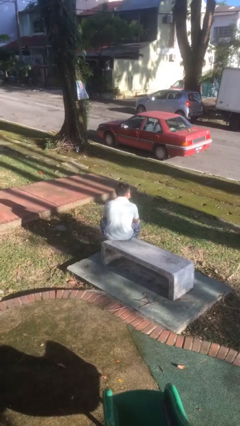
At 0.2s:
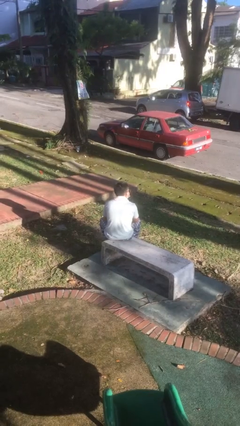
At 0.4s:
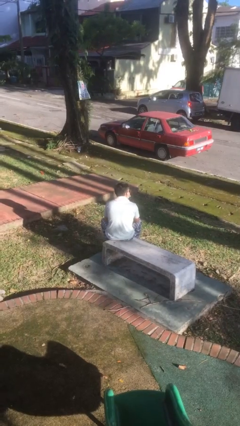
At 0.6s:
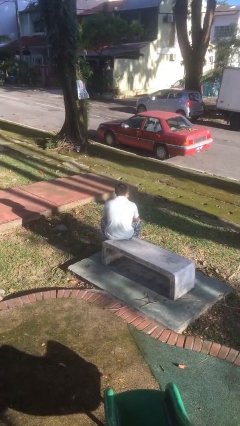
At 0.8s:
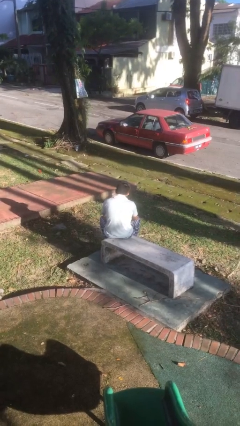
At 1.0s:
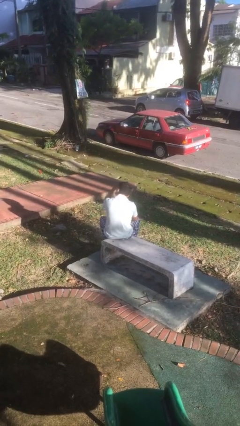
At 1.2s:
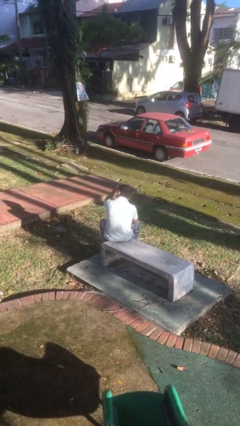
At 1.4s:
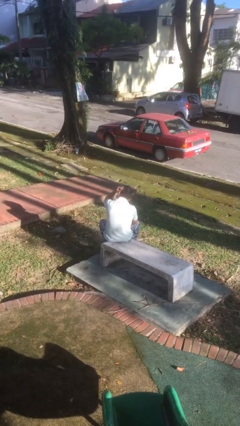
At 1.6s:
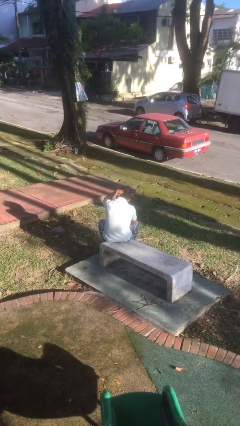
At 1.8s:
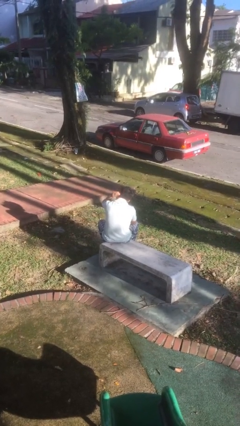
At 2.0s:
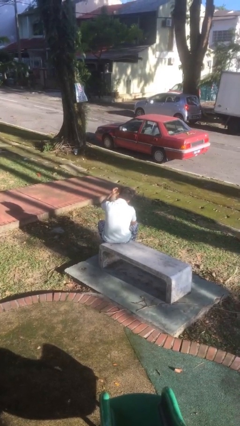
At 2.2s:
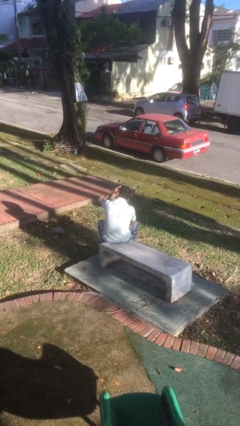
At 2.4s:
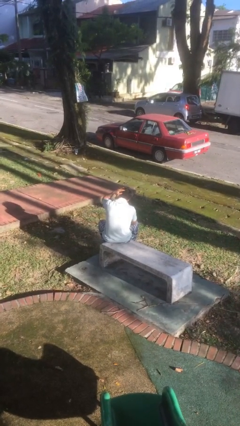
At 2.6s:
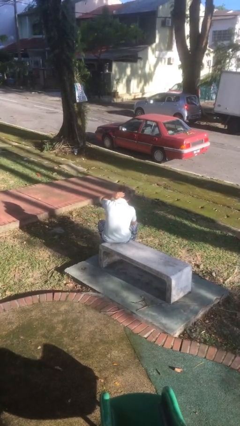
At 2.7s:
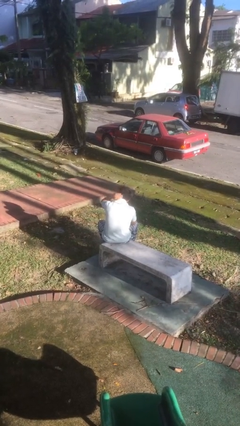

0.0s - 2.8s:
person strokes hair

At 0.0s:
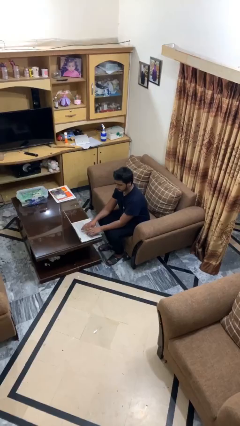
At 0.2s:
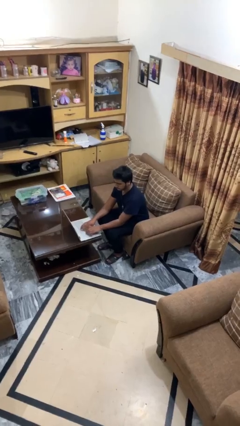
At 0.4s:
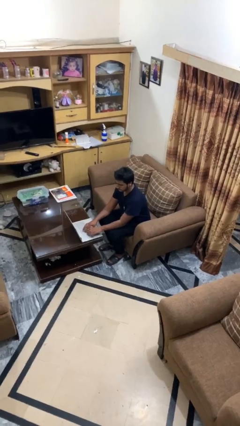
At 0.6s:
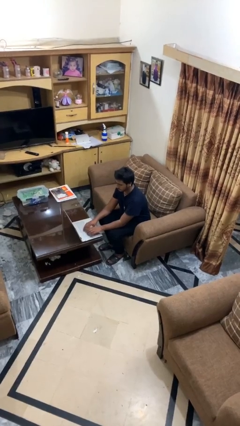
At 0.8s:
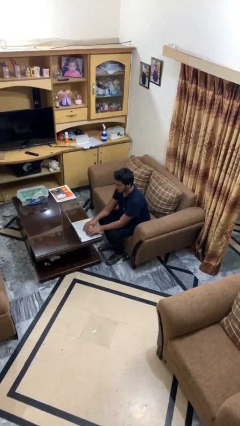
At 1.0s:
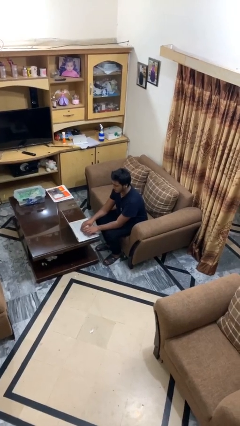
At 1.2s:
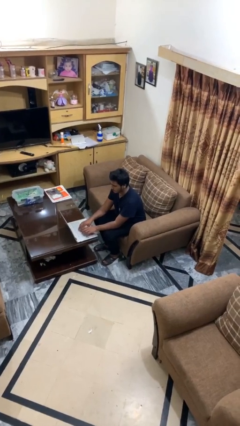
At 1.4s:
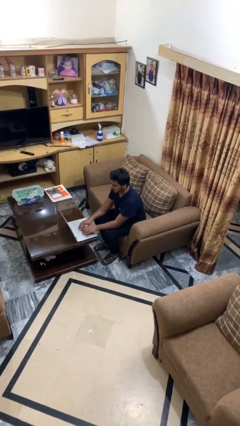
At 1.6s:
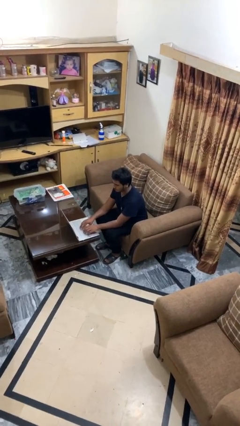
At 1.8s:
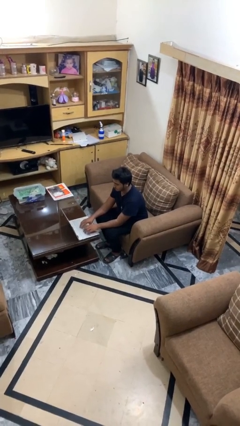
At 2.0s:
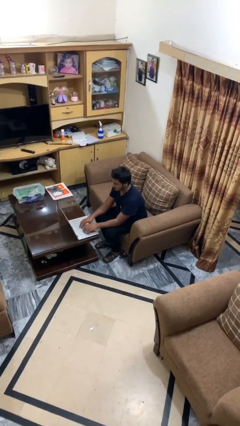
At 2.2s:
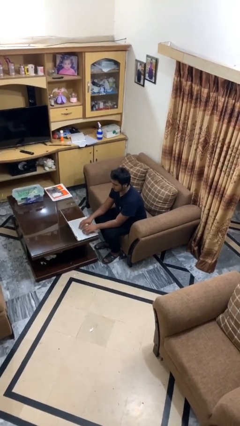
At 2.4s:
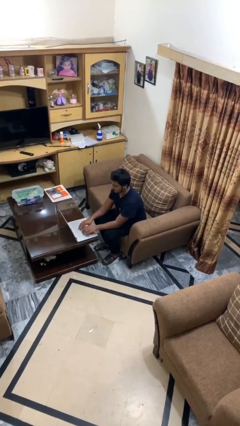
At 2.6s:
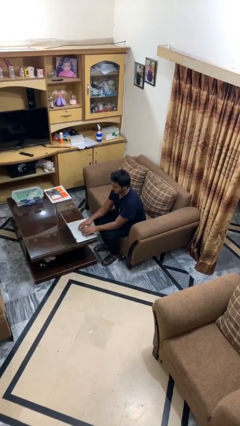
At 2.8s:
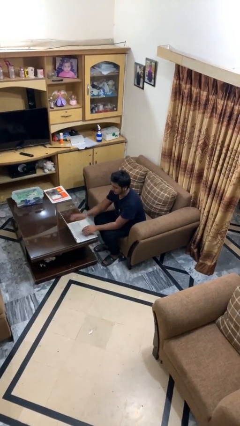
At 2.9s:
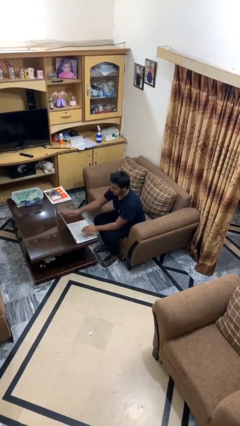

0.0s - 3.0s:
person interacts with laptop

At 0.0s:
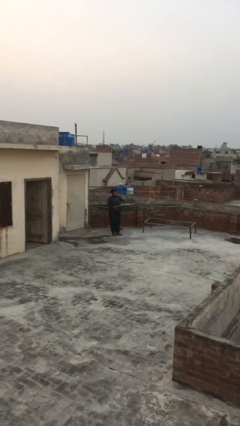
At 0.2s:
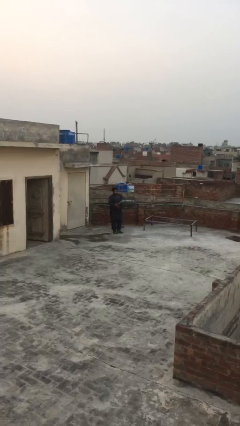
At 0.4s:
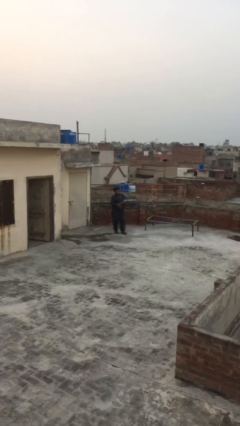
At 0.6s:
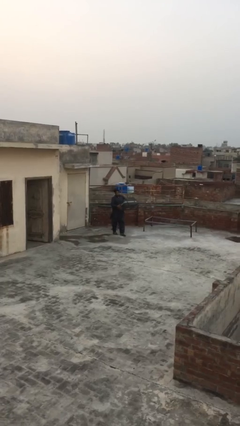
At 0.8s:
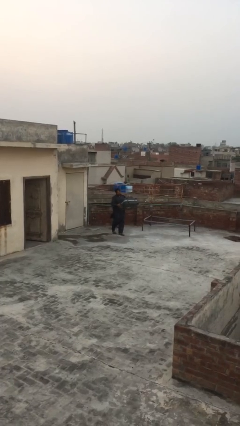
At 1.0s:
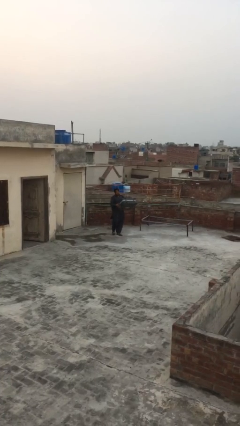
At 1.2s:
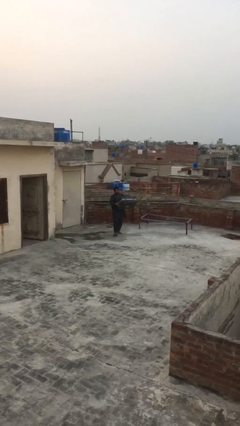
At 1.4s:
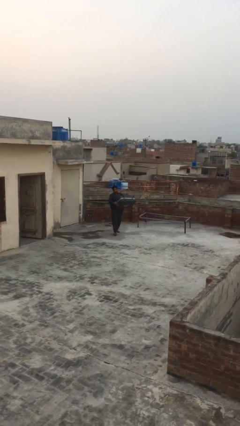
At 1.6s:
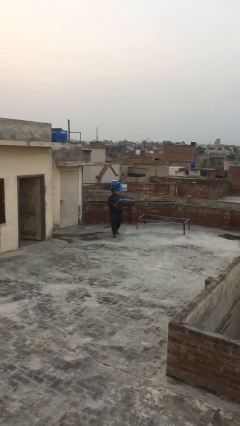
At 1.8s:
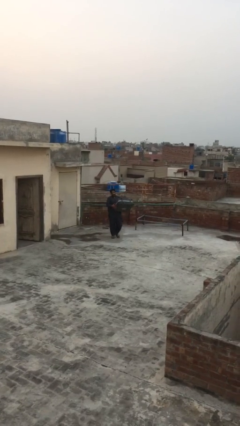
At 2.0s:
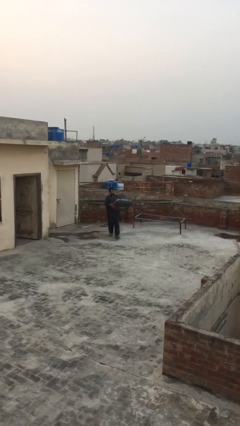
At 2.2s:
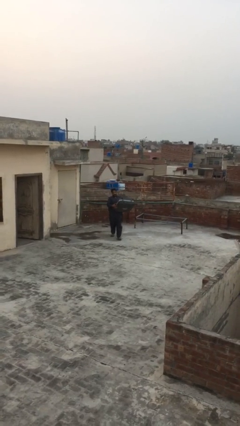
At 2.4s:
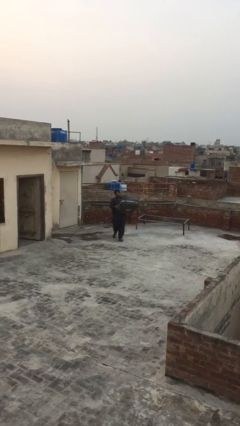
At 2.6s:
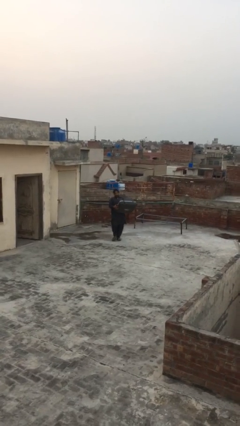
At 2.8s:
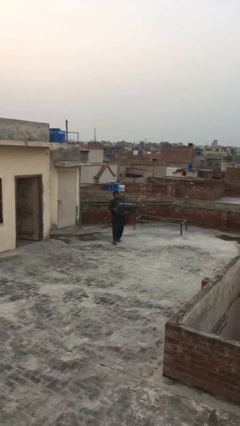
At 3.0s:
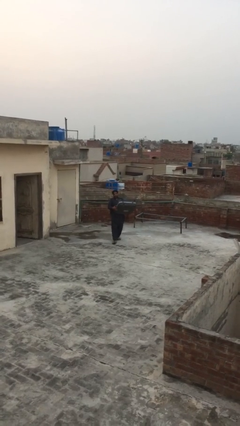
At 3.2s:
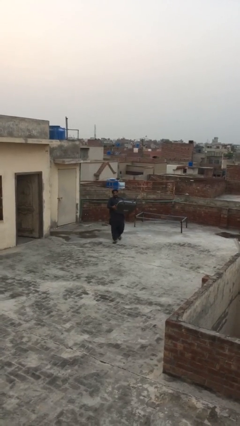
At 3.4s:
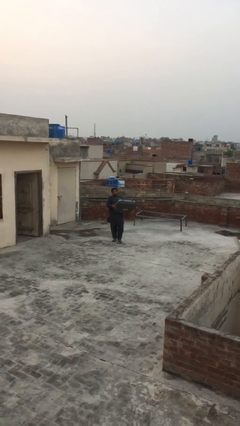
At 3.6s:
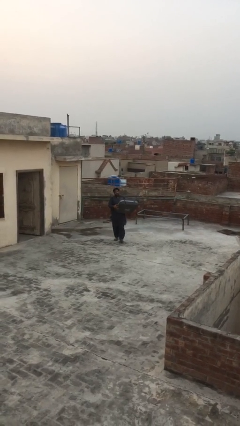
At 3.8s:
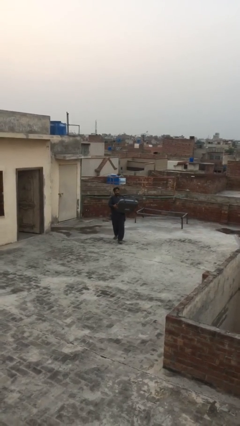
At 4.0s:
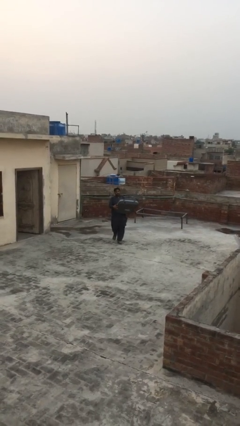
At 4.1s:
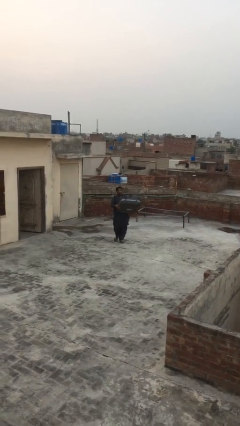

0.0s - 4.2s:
person carries heavy object

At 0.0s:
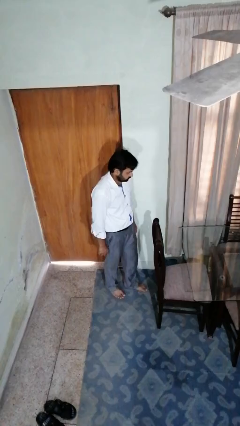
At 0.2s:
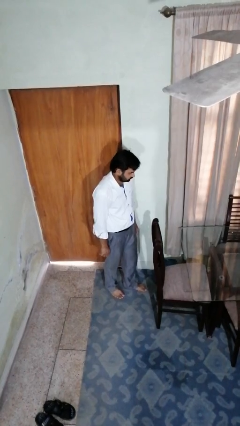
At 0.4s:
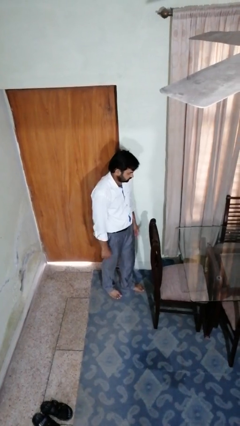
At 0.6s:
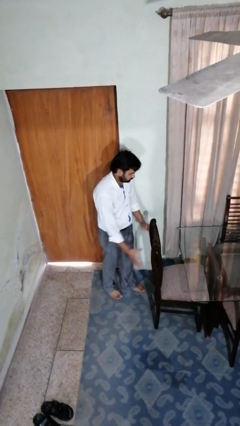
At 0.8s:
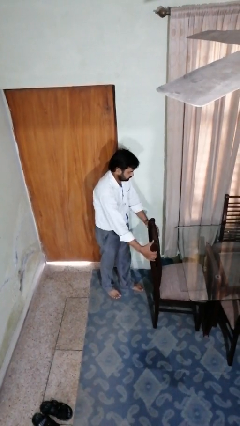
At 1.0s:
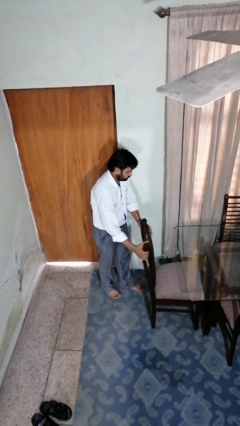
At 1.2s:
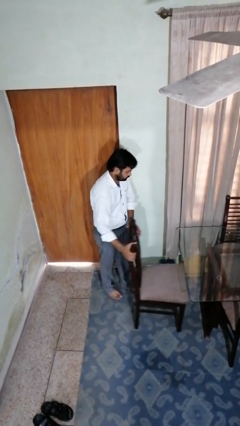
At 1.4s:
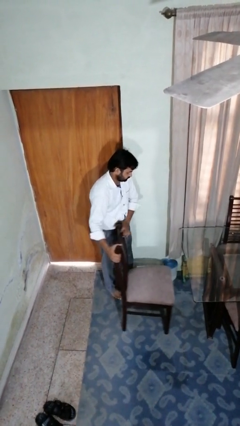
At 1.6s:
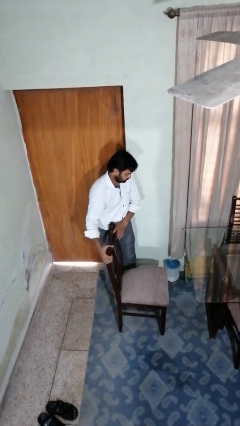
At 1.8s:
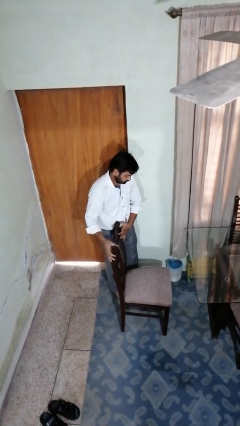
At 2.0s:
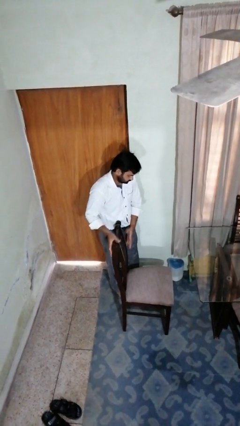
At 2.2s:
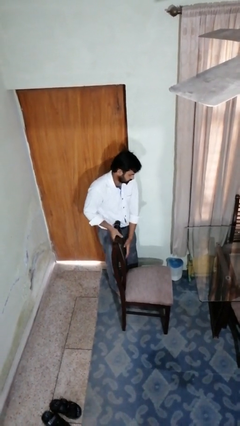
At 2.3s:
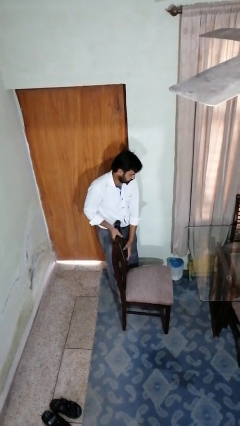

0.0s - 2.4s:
person pulls out chair

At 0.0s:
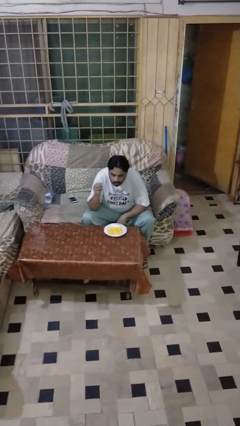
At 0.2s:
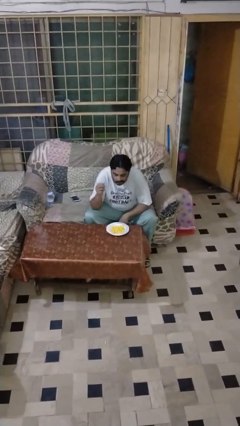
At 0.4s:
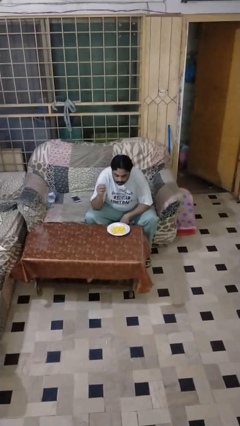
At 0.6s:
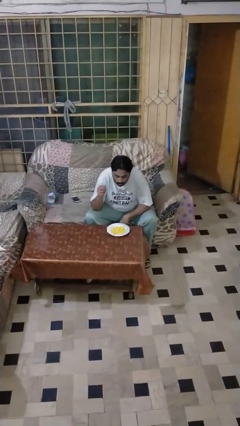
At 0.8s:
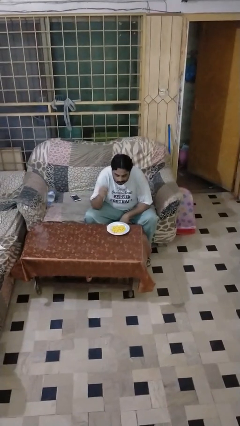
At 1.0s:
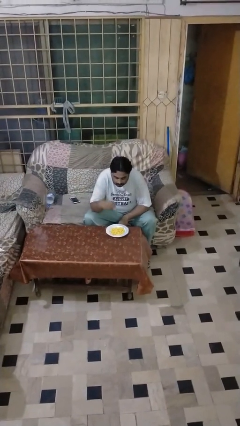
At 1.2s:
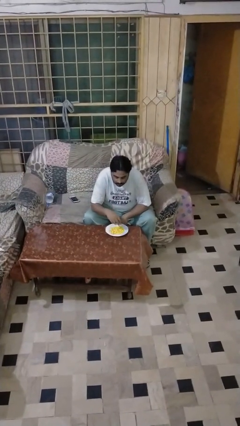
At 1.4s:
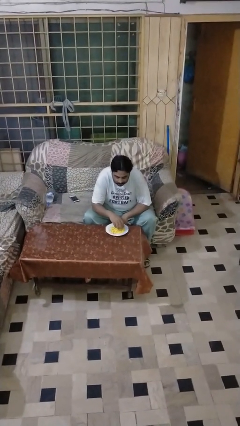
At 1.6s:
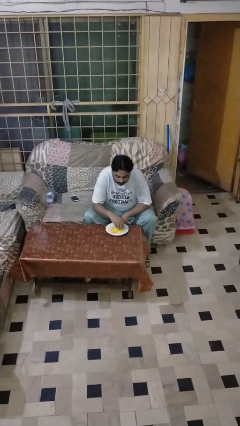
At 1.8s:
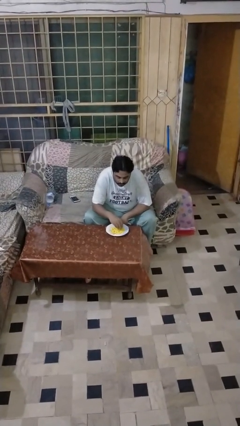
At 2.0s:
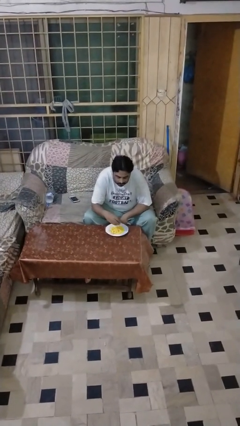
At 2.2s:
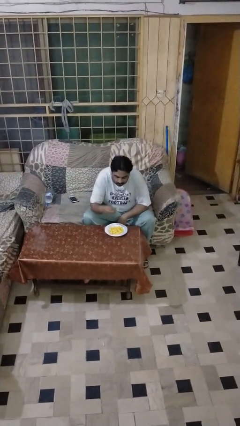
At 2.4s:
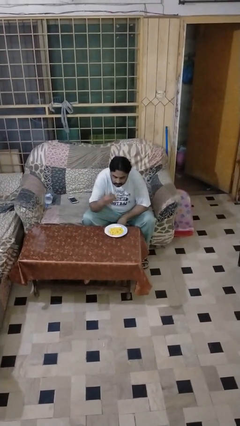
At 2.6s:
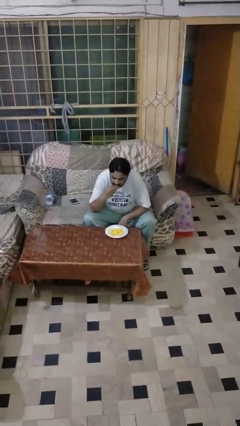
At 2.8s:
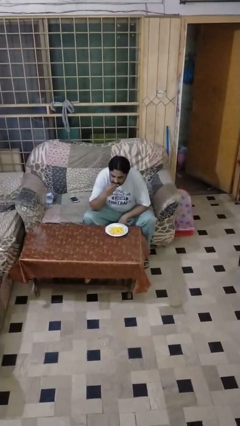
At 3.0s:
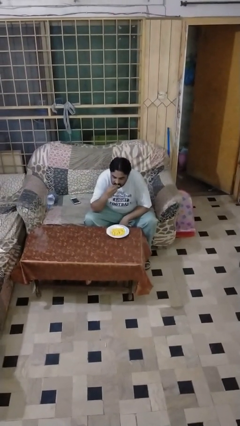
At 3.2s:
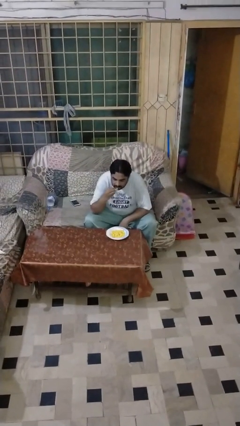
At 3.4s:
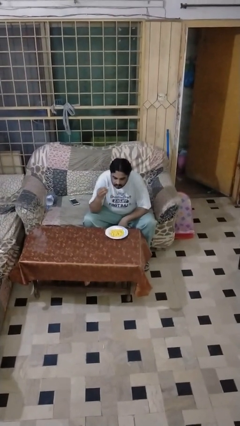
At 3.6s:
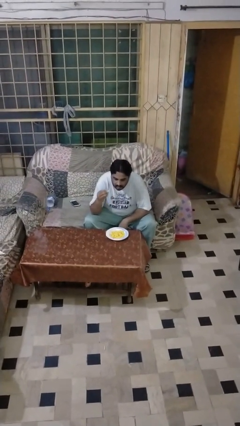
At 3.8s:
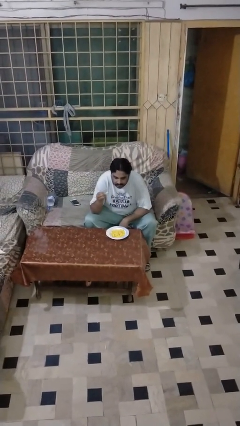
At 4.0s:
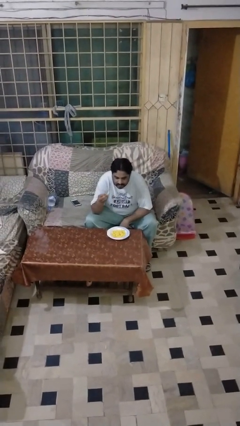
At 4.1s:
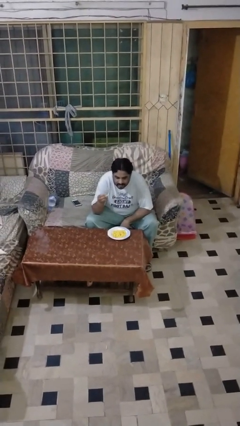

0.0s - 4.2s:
person eats with hands

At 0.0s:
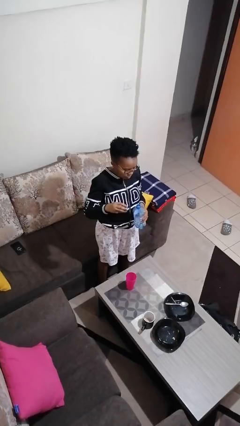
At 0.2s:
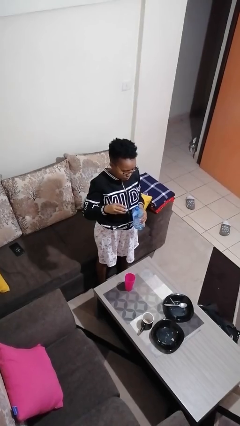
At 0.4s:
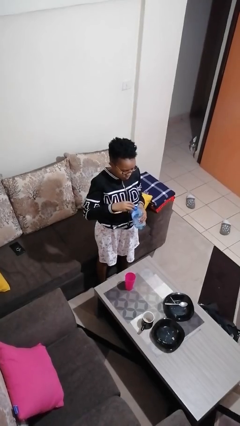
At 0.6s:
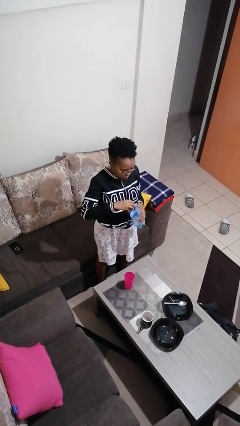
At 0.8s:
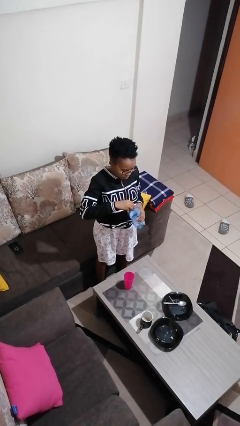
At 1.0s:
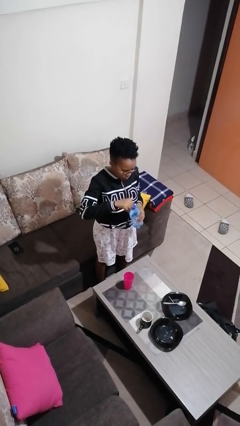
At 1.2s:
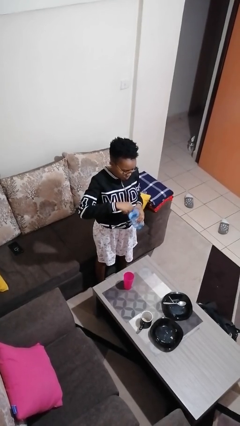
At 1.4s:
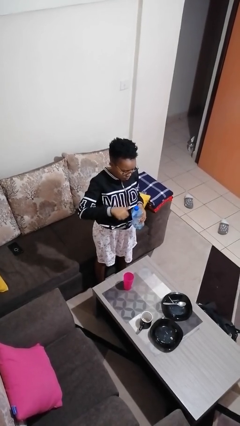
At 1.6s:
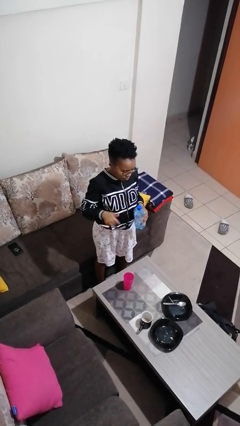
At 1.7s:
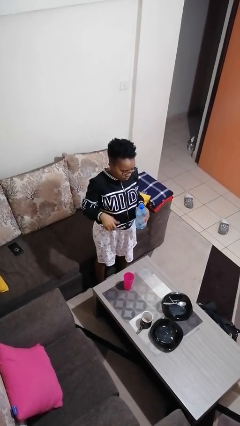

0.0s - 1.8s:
person screws lid to bottle
